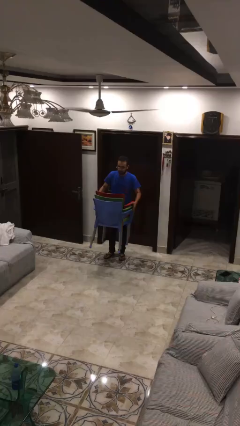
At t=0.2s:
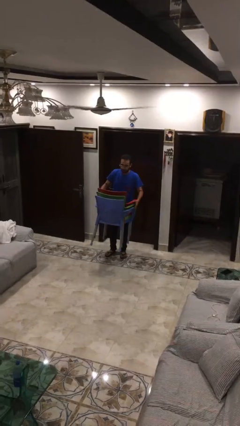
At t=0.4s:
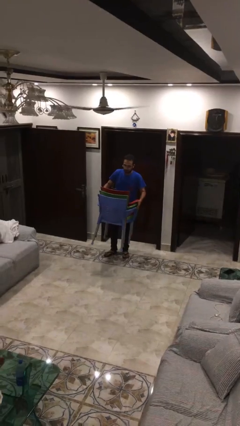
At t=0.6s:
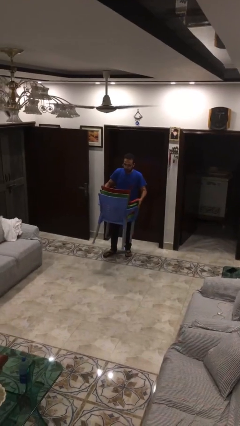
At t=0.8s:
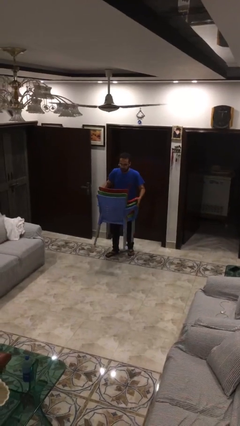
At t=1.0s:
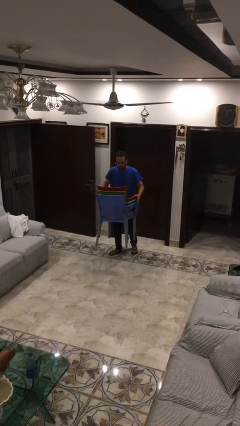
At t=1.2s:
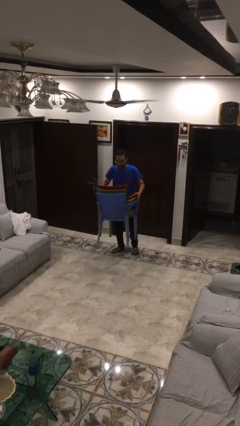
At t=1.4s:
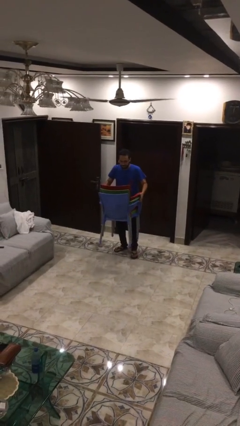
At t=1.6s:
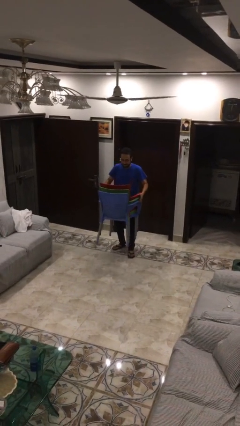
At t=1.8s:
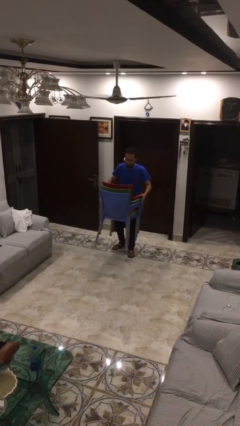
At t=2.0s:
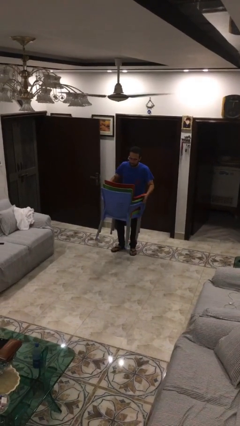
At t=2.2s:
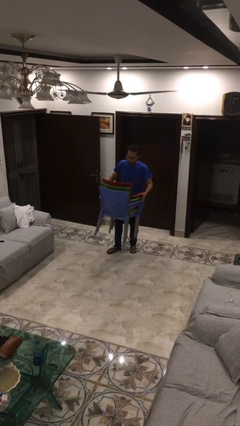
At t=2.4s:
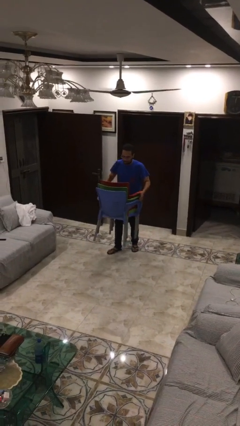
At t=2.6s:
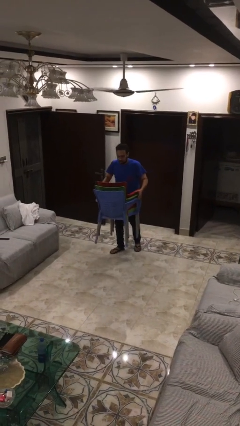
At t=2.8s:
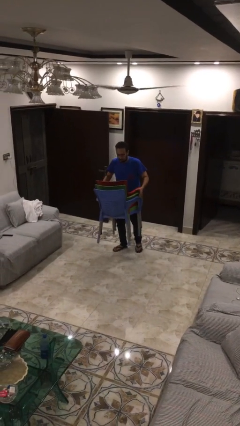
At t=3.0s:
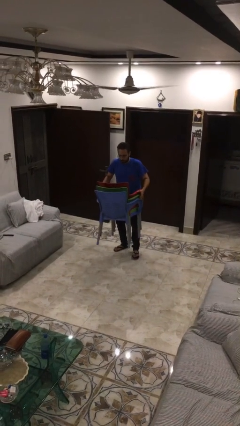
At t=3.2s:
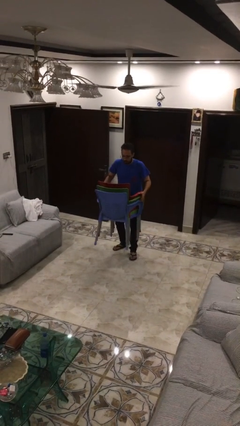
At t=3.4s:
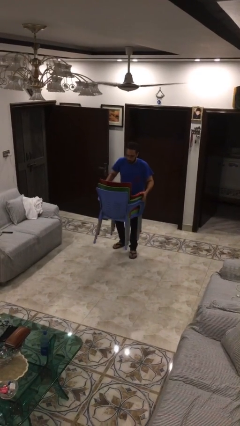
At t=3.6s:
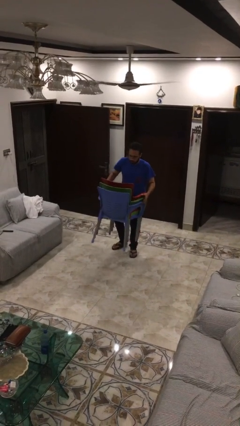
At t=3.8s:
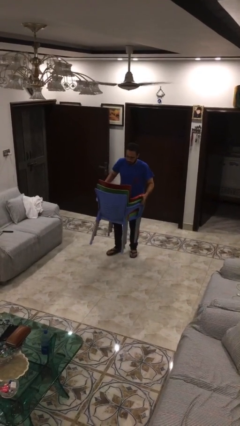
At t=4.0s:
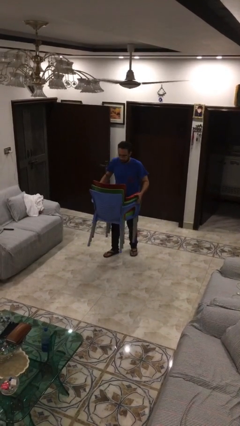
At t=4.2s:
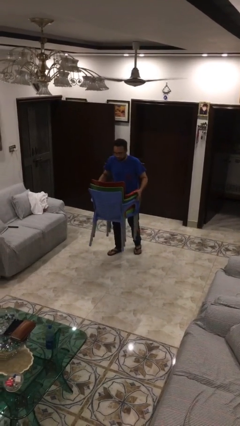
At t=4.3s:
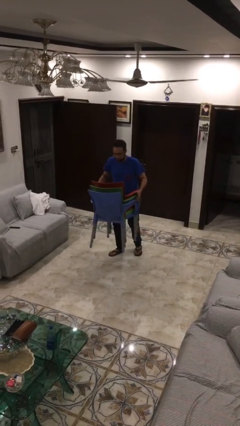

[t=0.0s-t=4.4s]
person carries heavy object

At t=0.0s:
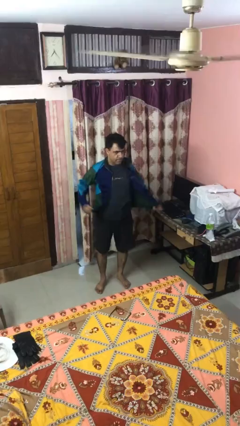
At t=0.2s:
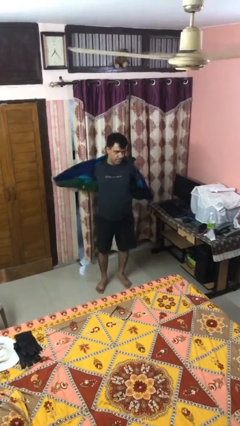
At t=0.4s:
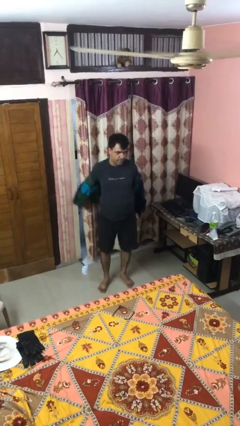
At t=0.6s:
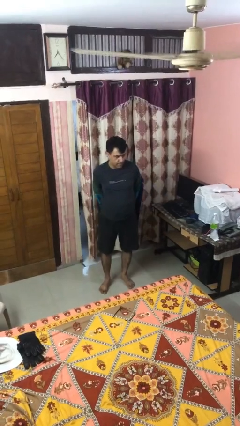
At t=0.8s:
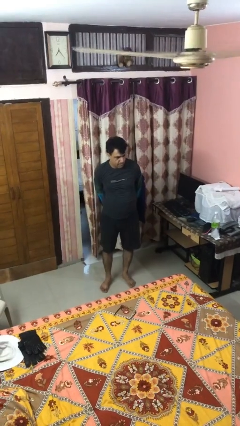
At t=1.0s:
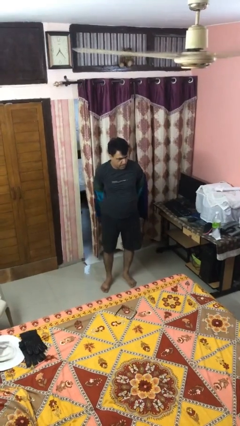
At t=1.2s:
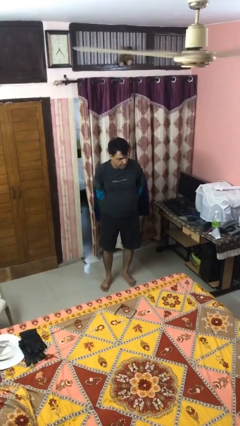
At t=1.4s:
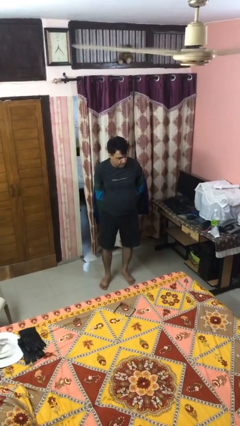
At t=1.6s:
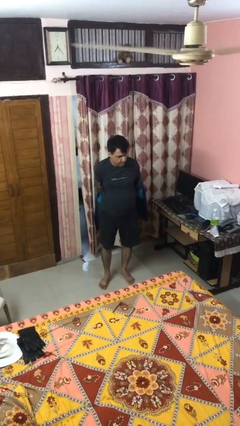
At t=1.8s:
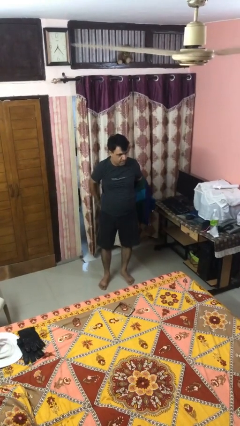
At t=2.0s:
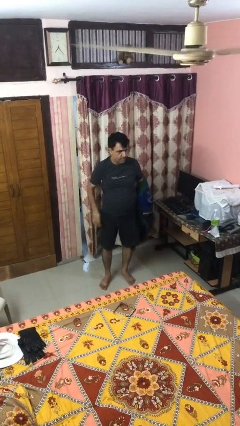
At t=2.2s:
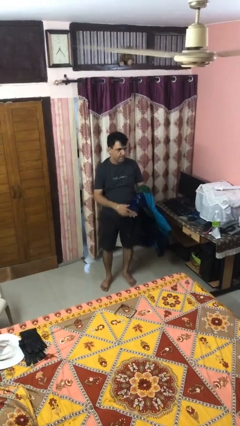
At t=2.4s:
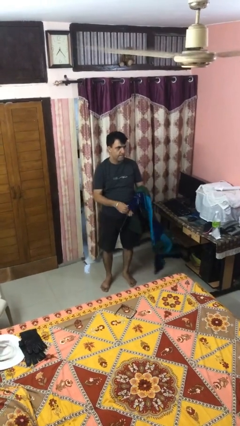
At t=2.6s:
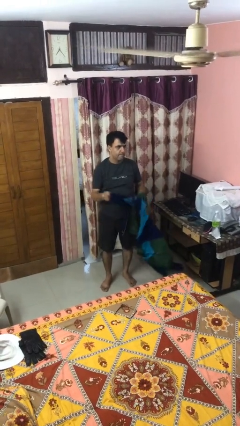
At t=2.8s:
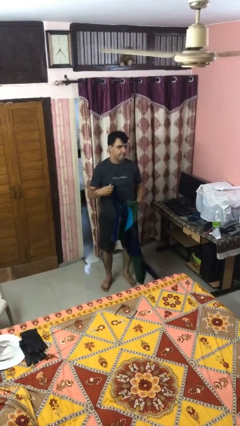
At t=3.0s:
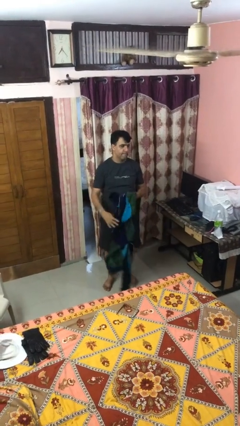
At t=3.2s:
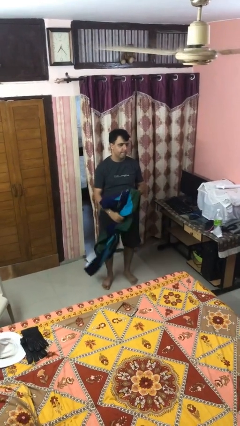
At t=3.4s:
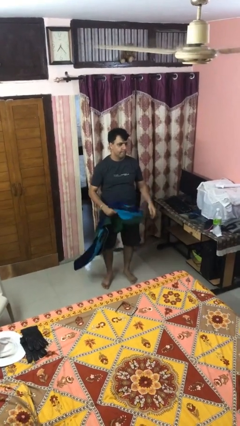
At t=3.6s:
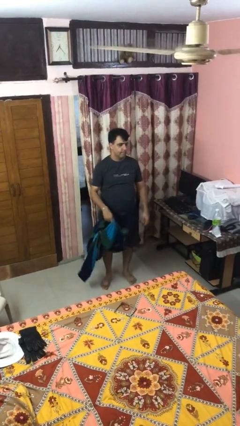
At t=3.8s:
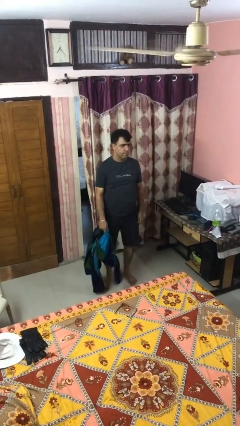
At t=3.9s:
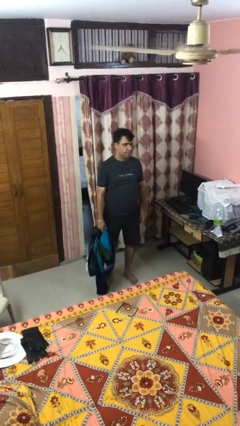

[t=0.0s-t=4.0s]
person takes off jacket

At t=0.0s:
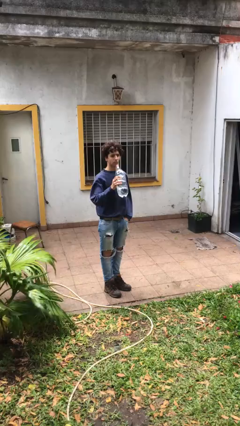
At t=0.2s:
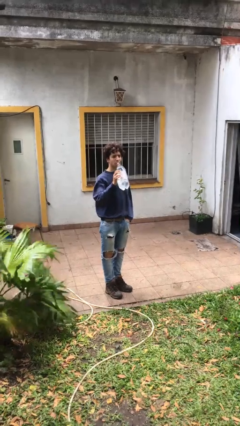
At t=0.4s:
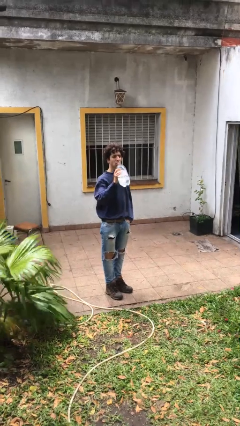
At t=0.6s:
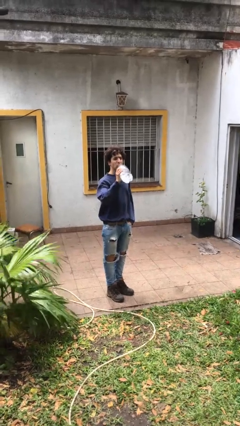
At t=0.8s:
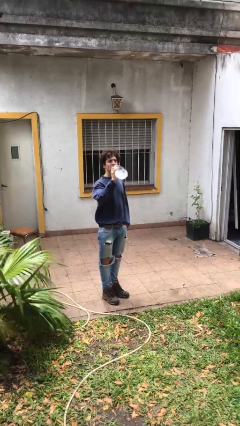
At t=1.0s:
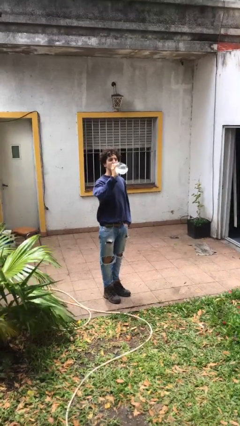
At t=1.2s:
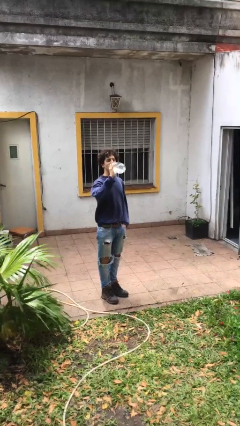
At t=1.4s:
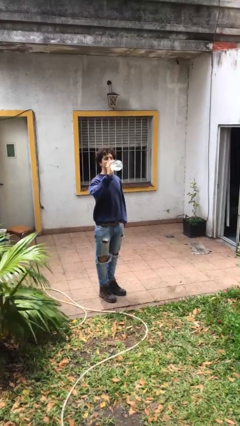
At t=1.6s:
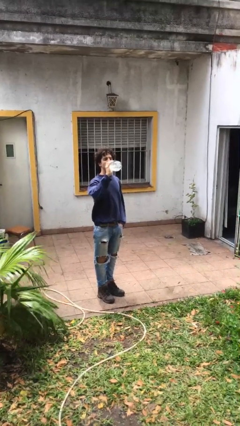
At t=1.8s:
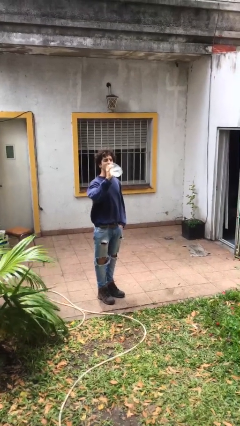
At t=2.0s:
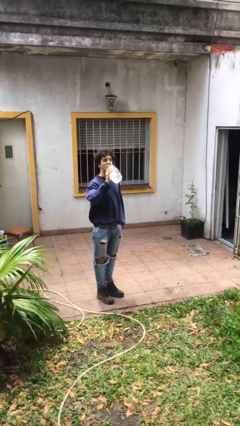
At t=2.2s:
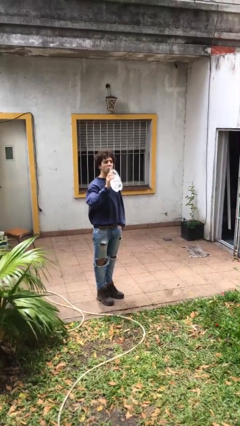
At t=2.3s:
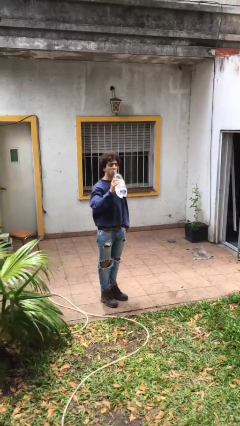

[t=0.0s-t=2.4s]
person drinks from bottle

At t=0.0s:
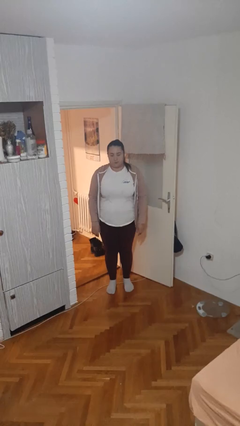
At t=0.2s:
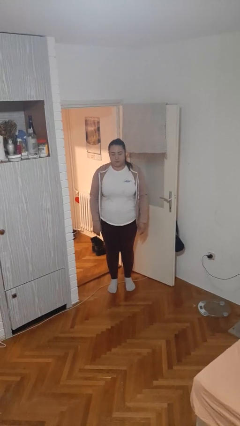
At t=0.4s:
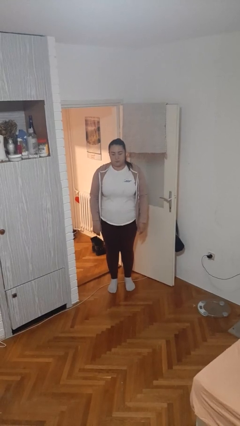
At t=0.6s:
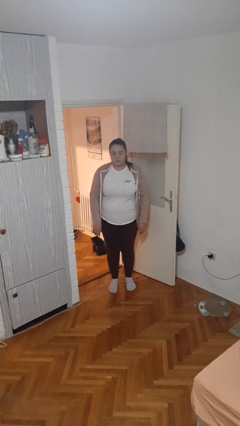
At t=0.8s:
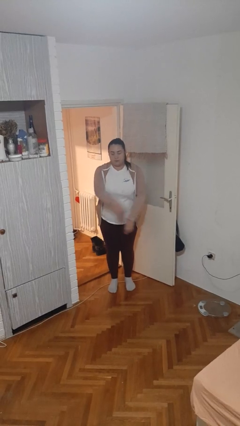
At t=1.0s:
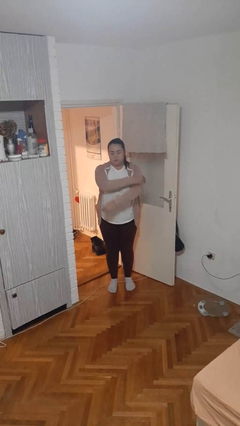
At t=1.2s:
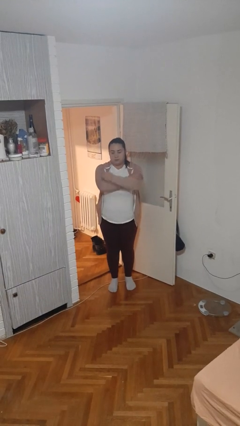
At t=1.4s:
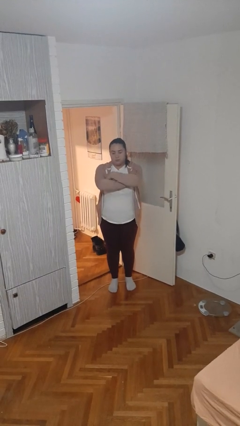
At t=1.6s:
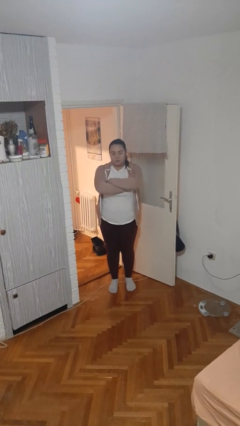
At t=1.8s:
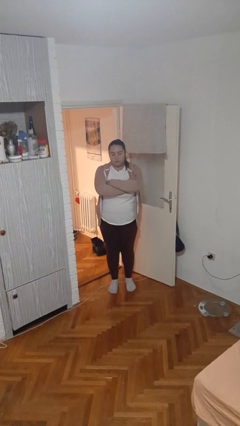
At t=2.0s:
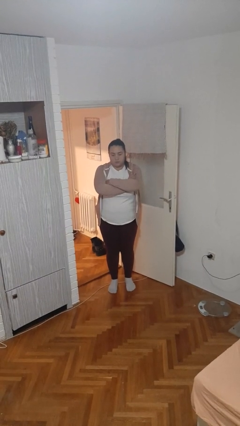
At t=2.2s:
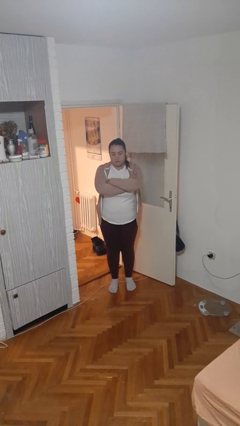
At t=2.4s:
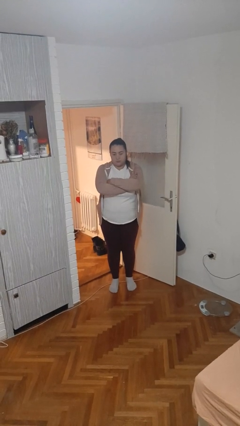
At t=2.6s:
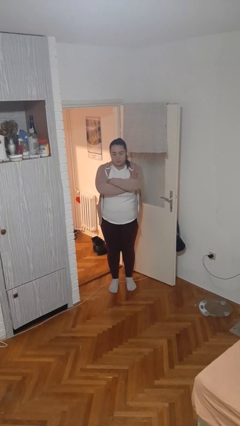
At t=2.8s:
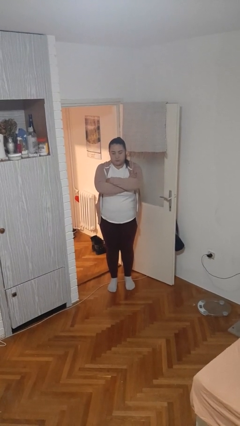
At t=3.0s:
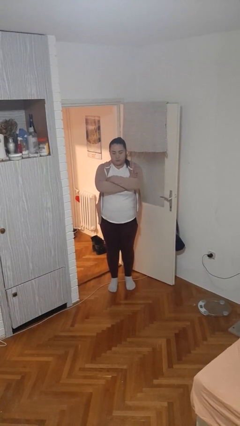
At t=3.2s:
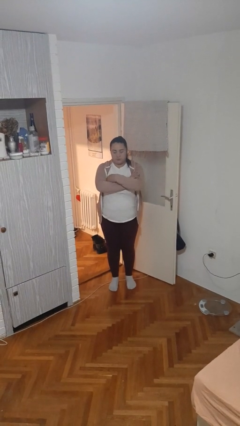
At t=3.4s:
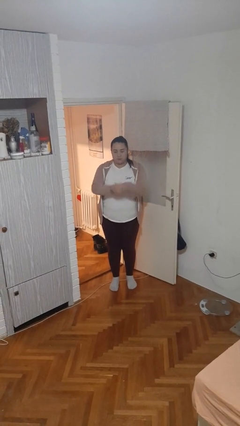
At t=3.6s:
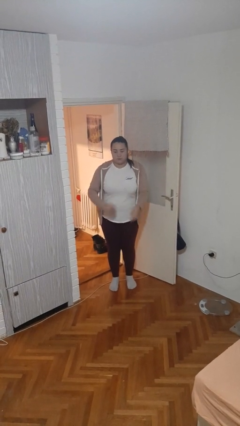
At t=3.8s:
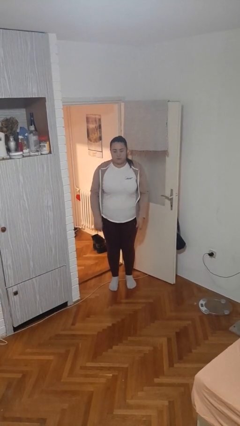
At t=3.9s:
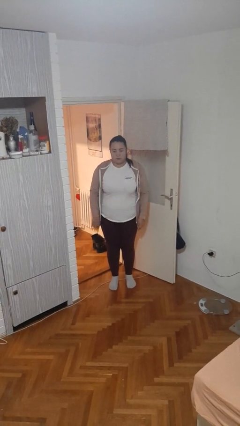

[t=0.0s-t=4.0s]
person crosses arms

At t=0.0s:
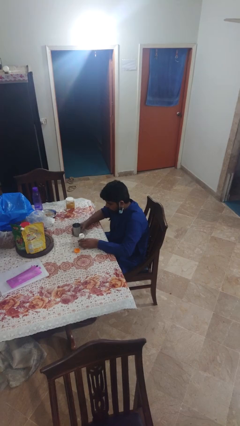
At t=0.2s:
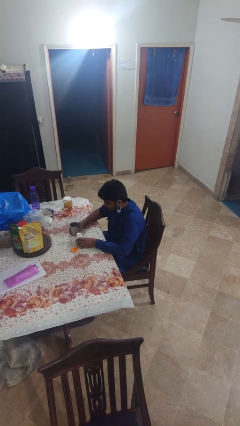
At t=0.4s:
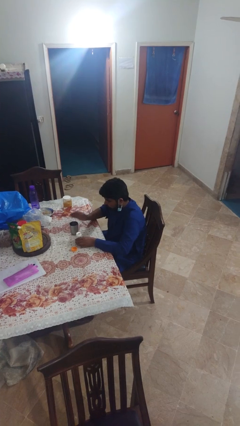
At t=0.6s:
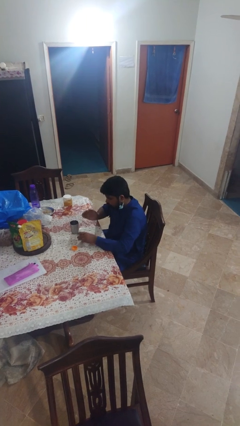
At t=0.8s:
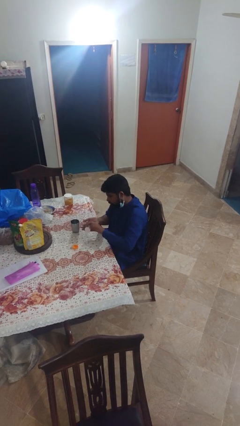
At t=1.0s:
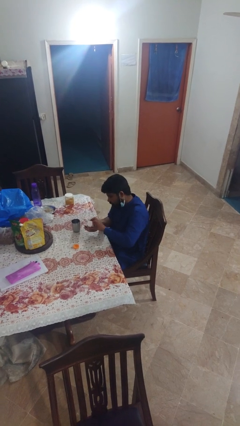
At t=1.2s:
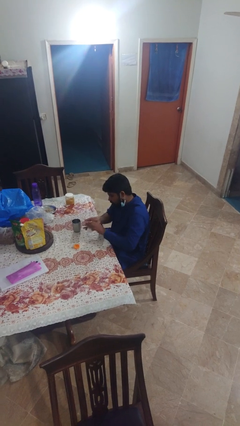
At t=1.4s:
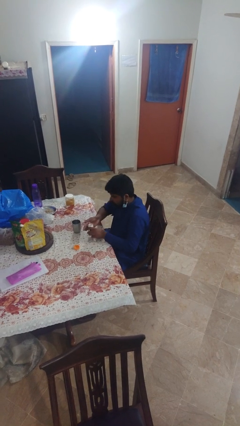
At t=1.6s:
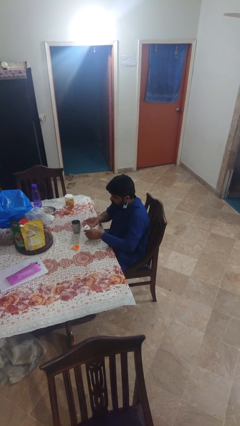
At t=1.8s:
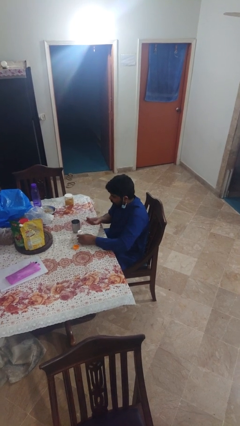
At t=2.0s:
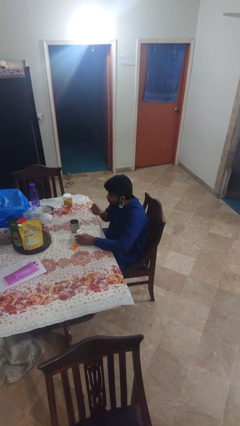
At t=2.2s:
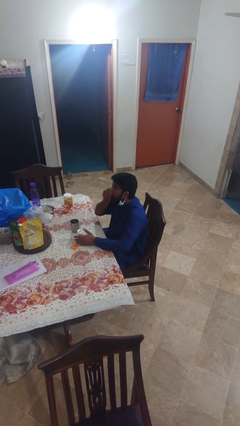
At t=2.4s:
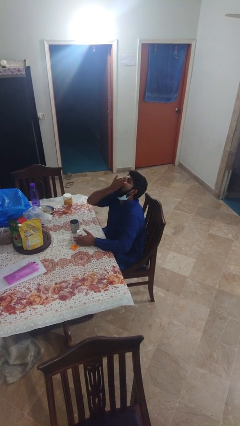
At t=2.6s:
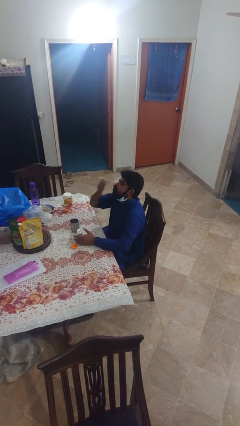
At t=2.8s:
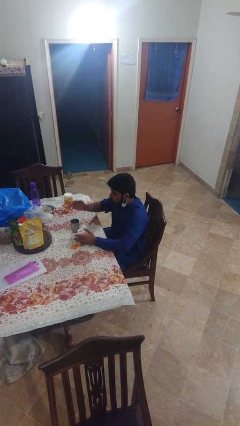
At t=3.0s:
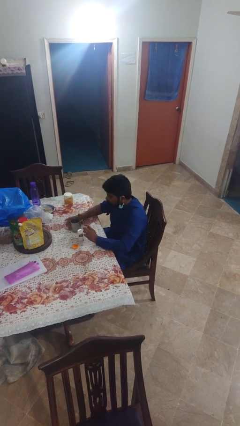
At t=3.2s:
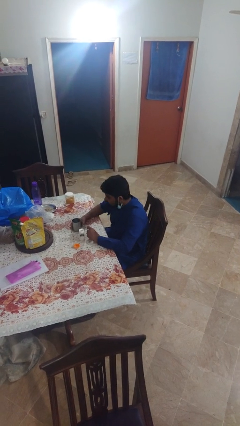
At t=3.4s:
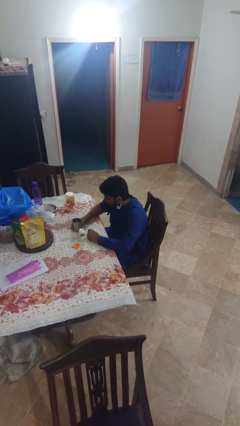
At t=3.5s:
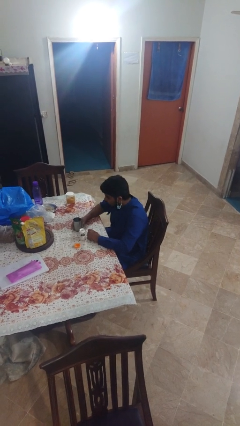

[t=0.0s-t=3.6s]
person takes medicine pills
